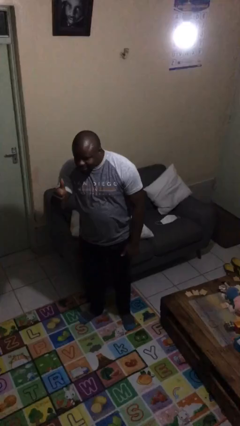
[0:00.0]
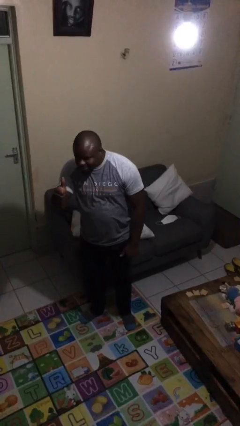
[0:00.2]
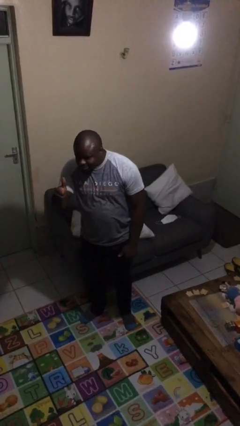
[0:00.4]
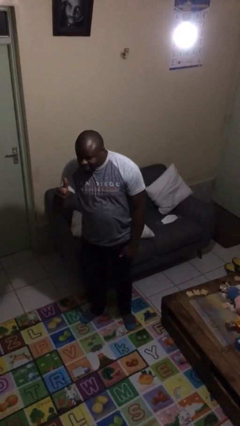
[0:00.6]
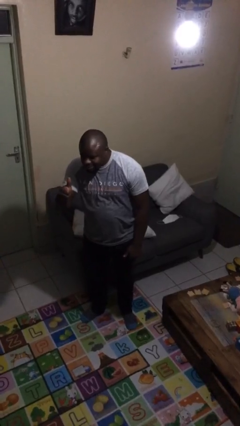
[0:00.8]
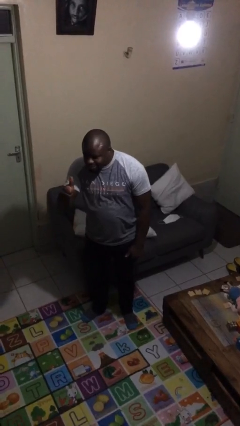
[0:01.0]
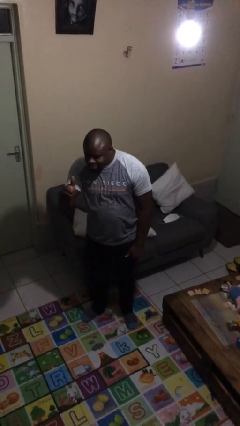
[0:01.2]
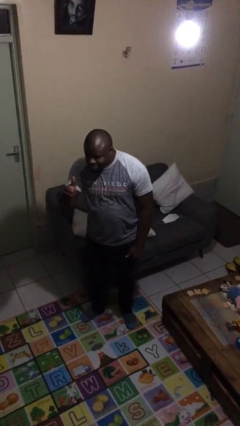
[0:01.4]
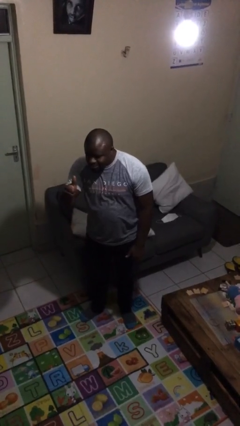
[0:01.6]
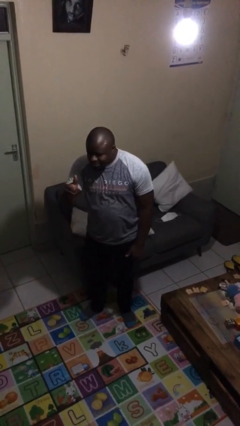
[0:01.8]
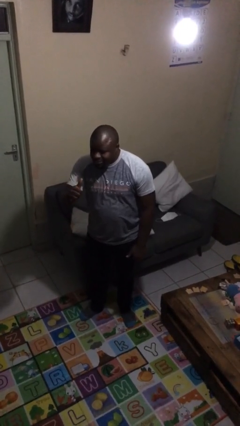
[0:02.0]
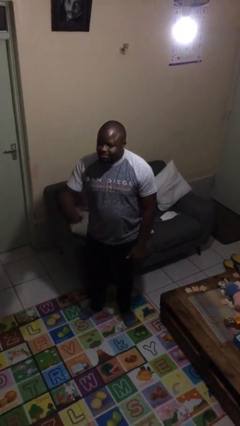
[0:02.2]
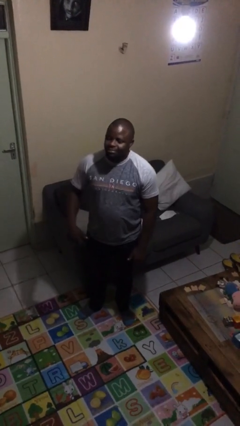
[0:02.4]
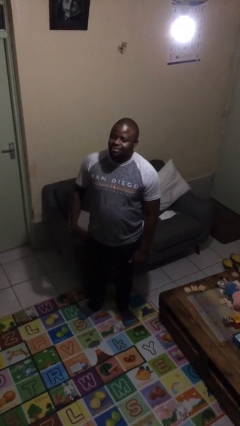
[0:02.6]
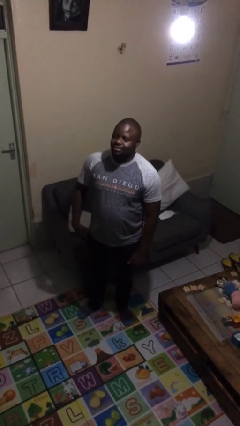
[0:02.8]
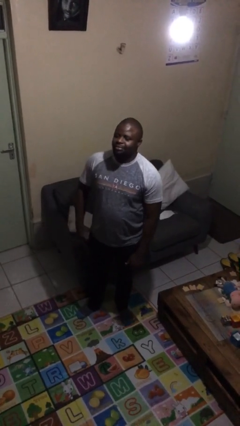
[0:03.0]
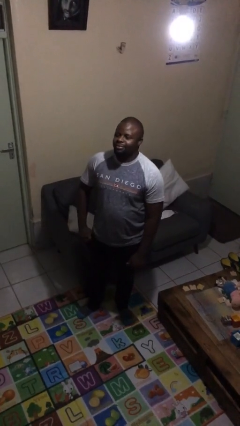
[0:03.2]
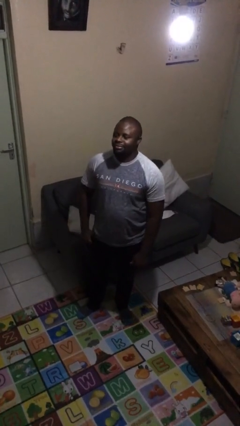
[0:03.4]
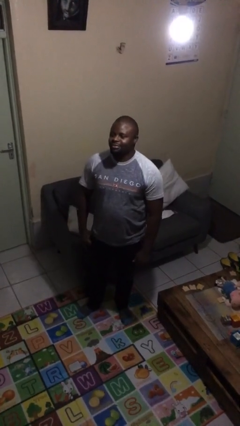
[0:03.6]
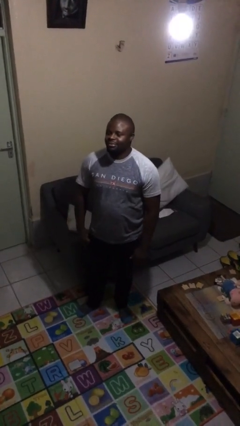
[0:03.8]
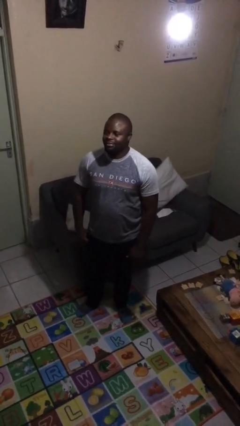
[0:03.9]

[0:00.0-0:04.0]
person gestures thumbs up

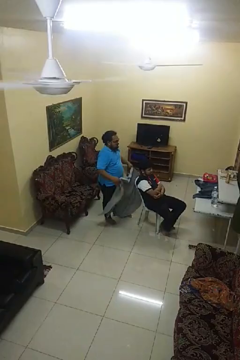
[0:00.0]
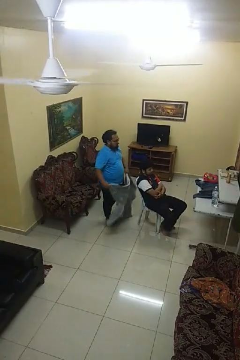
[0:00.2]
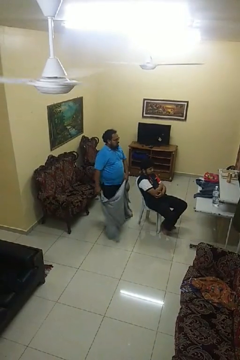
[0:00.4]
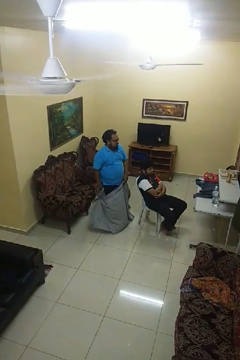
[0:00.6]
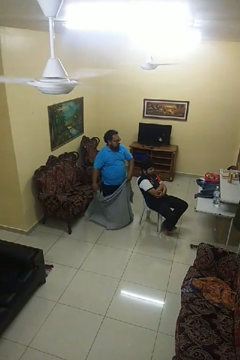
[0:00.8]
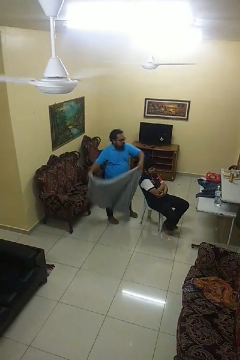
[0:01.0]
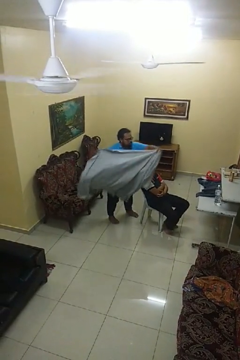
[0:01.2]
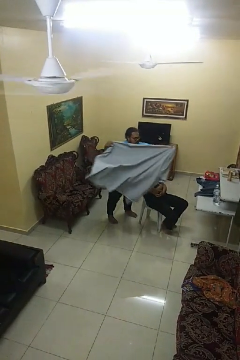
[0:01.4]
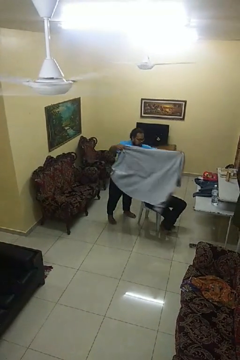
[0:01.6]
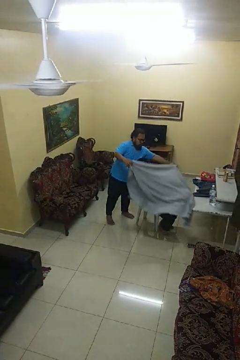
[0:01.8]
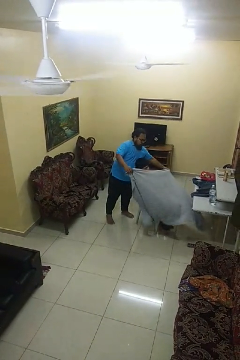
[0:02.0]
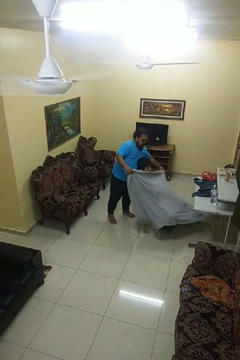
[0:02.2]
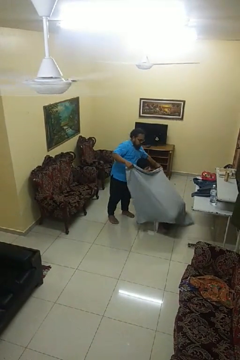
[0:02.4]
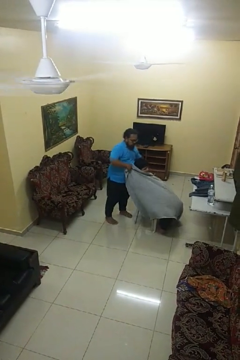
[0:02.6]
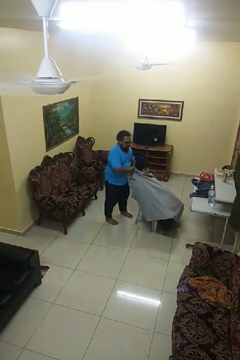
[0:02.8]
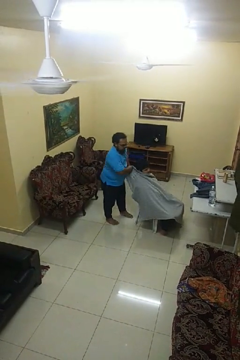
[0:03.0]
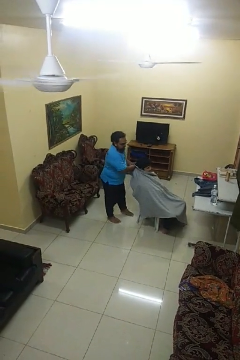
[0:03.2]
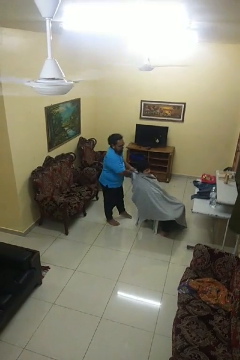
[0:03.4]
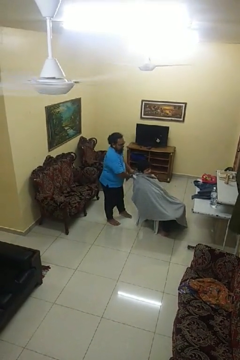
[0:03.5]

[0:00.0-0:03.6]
person covers friend with blanket

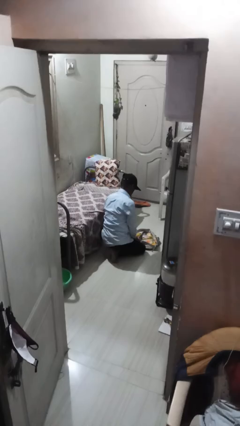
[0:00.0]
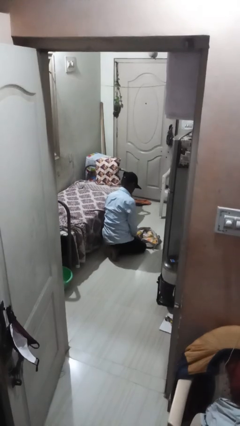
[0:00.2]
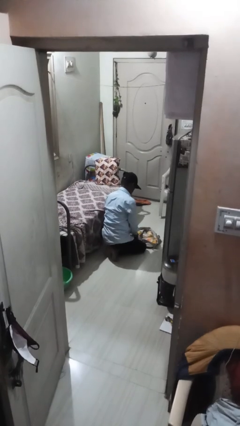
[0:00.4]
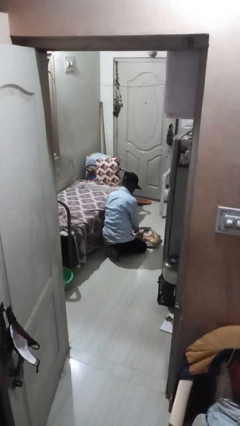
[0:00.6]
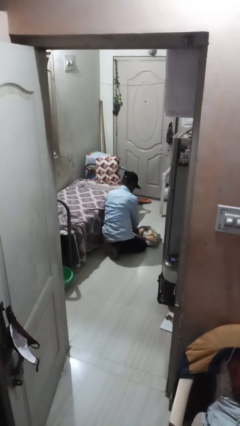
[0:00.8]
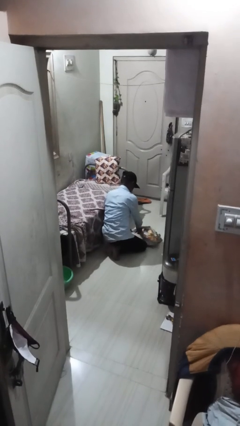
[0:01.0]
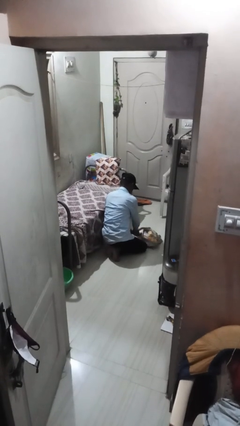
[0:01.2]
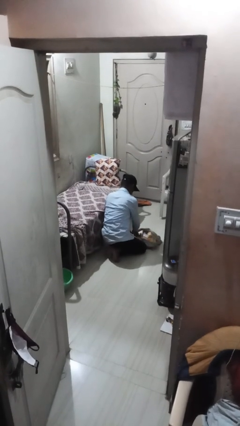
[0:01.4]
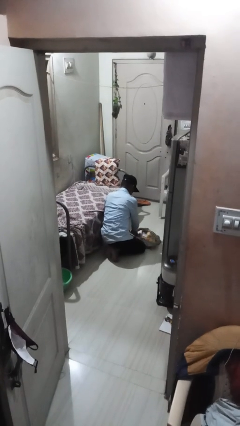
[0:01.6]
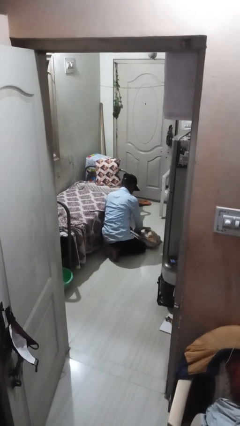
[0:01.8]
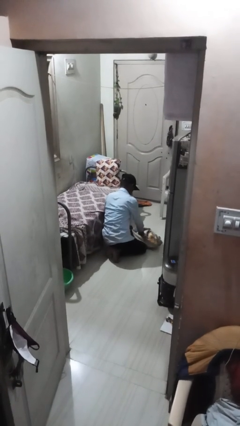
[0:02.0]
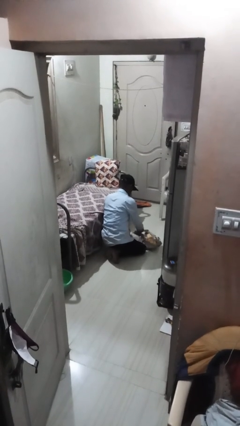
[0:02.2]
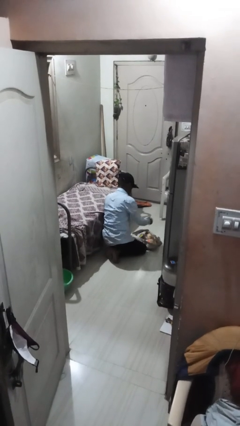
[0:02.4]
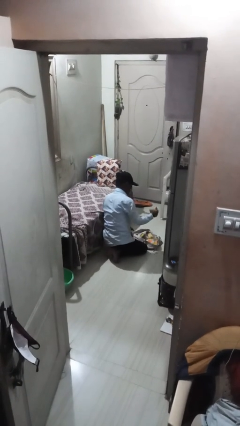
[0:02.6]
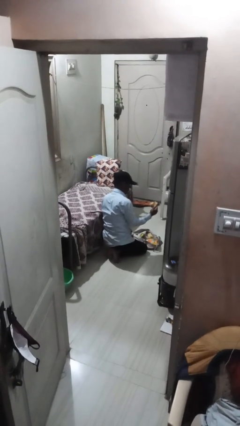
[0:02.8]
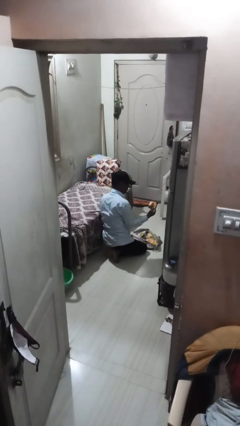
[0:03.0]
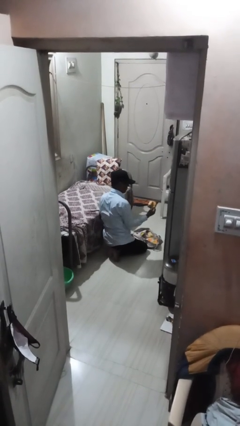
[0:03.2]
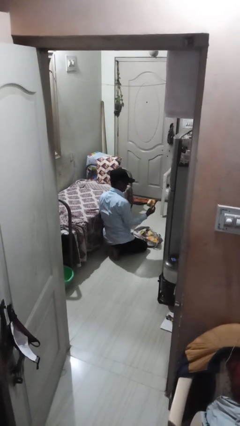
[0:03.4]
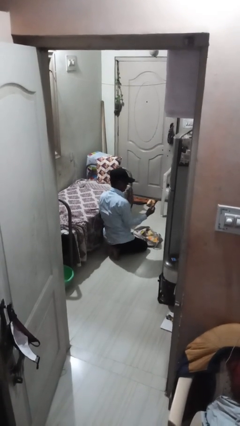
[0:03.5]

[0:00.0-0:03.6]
person takes object from bag

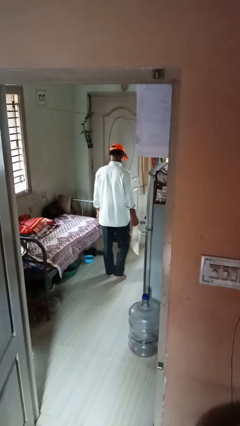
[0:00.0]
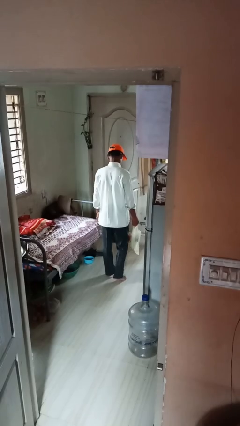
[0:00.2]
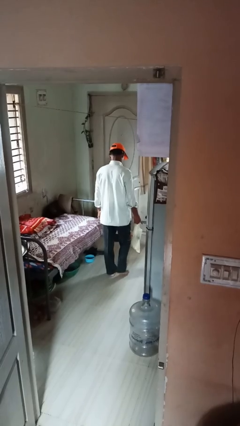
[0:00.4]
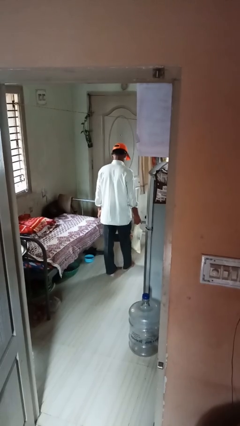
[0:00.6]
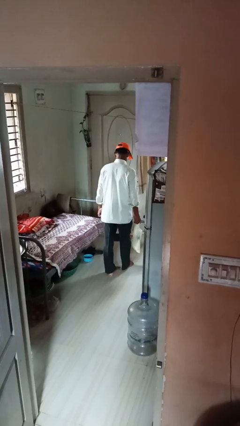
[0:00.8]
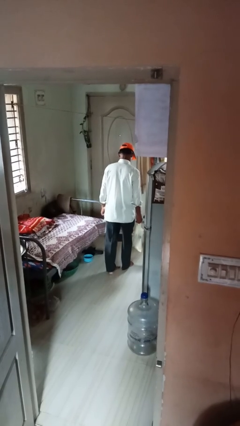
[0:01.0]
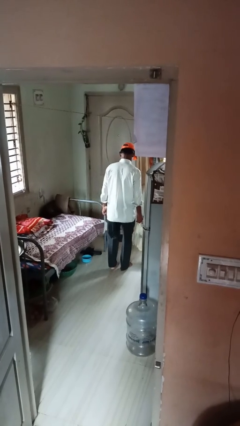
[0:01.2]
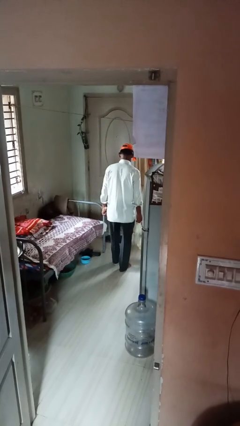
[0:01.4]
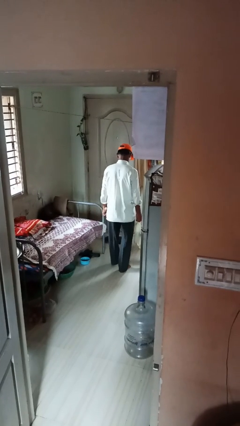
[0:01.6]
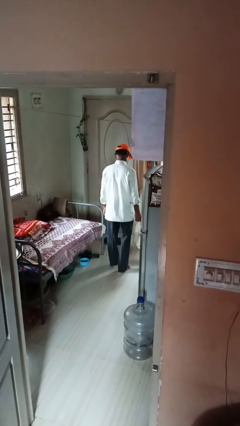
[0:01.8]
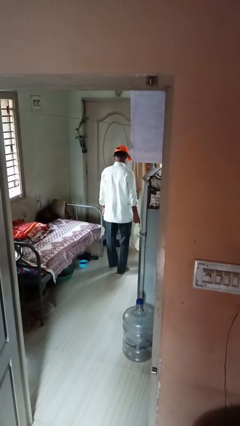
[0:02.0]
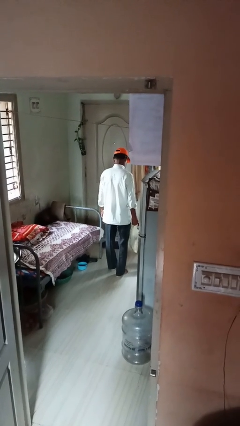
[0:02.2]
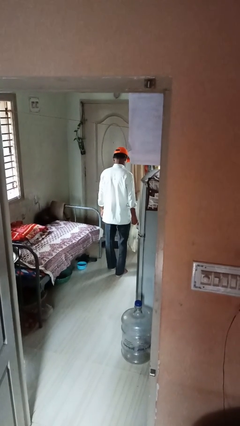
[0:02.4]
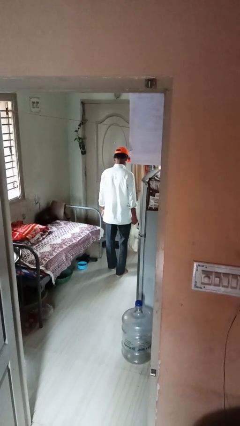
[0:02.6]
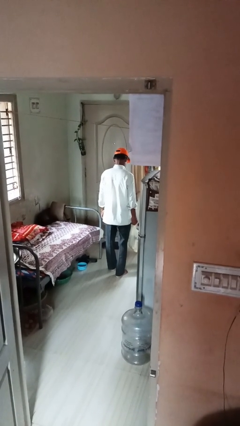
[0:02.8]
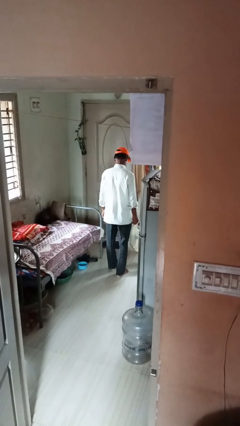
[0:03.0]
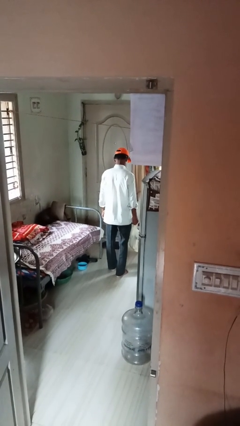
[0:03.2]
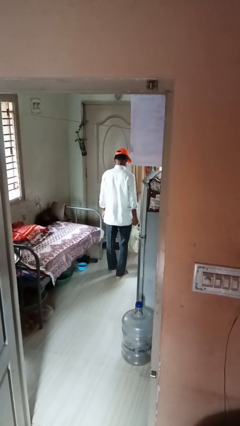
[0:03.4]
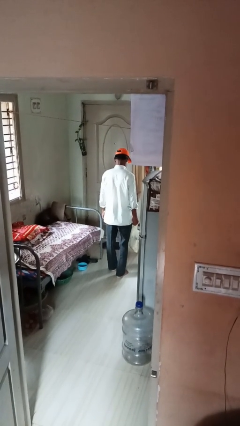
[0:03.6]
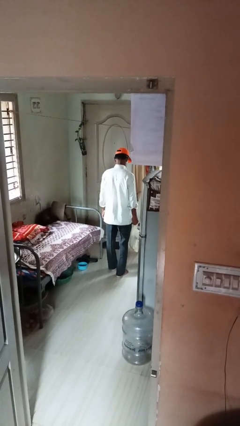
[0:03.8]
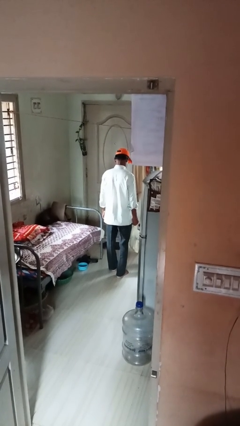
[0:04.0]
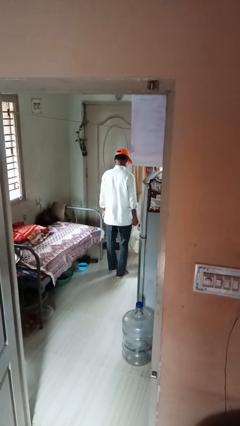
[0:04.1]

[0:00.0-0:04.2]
person carries groceries

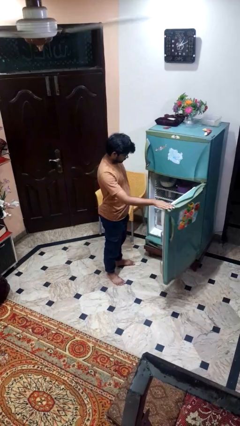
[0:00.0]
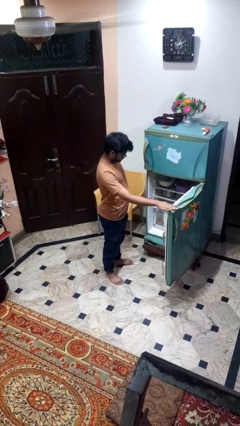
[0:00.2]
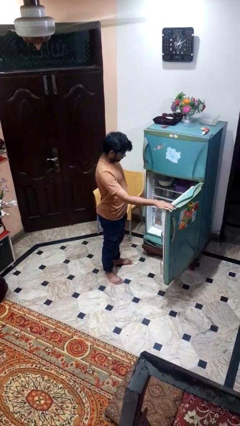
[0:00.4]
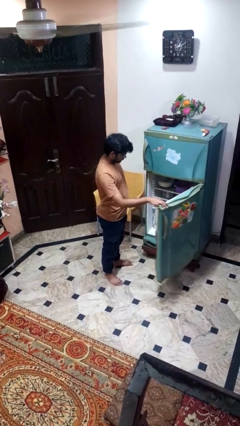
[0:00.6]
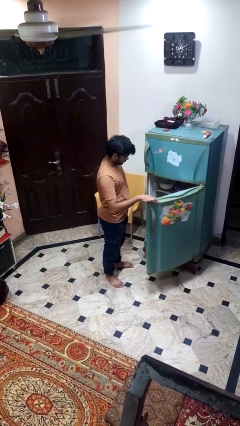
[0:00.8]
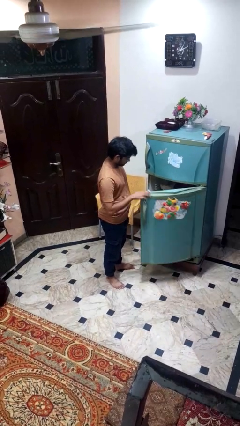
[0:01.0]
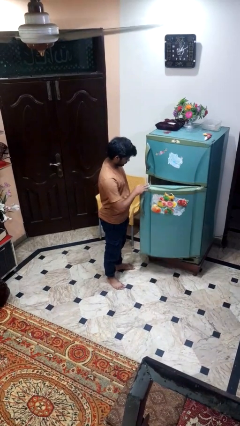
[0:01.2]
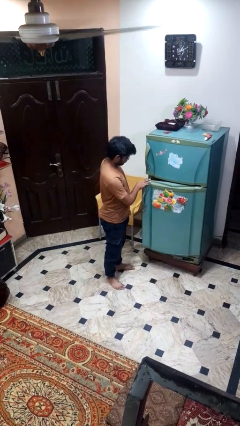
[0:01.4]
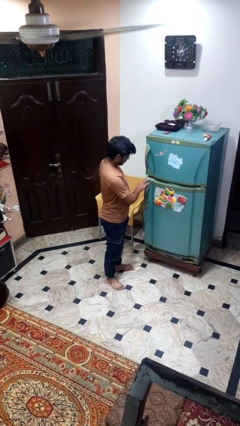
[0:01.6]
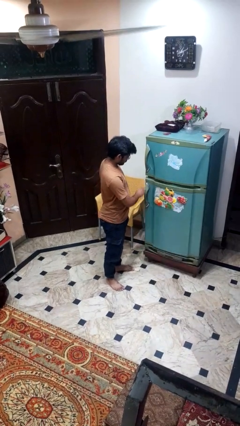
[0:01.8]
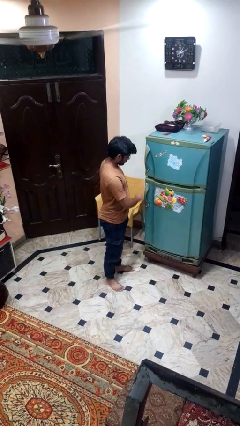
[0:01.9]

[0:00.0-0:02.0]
person closes refrigerator

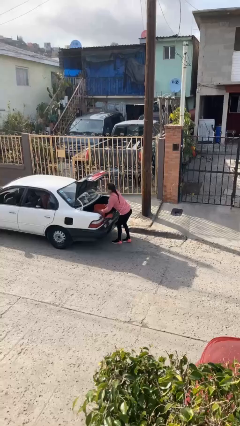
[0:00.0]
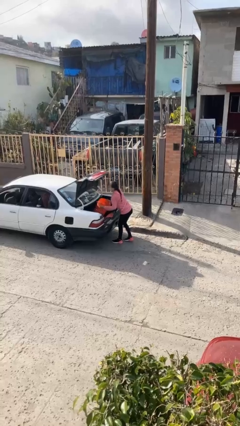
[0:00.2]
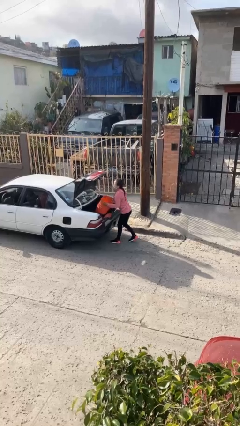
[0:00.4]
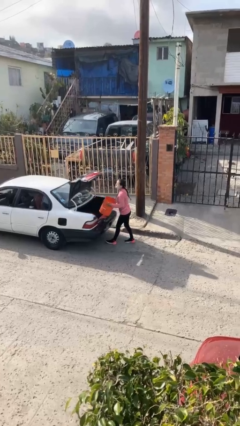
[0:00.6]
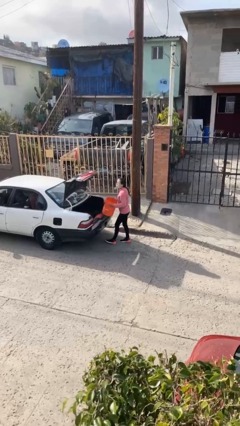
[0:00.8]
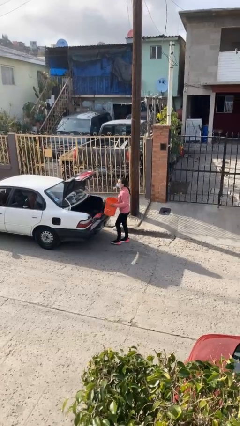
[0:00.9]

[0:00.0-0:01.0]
person unloads car
